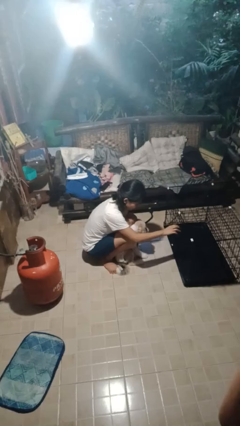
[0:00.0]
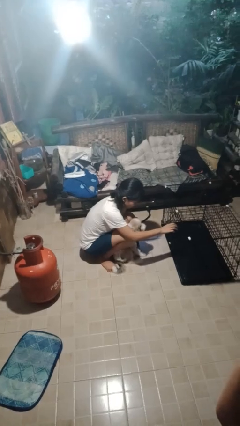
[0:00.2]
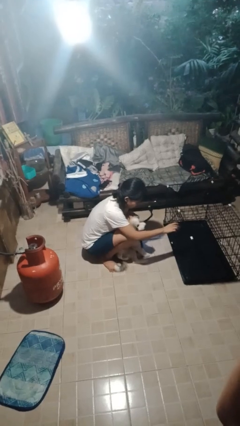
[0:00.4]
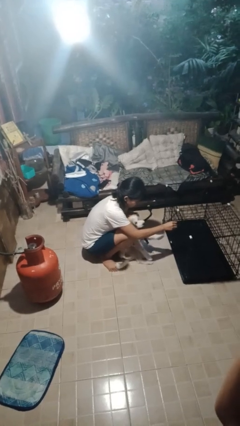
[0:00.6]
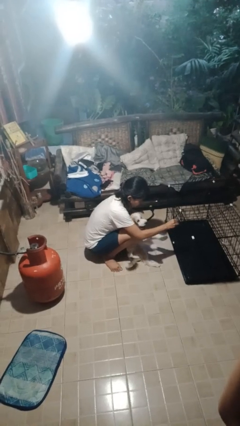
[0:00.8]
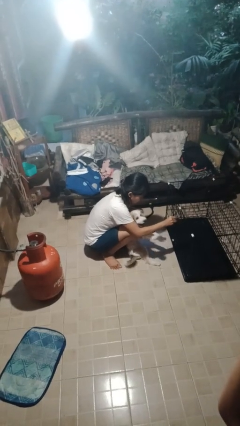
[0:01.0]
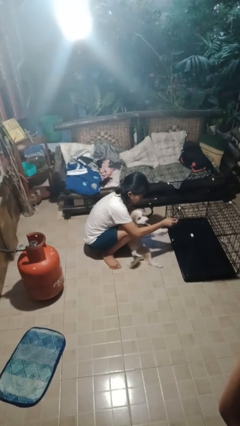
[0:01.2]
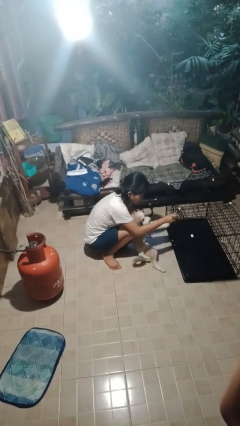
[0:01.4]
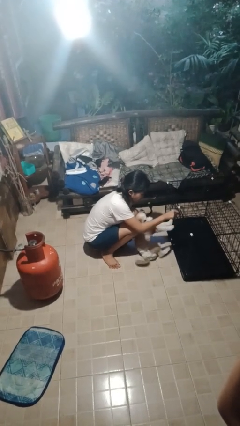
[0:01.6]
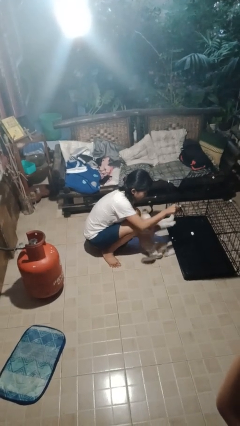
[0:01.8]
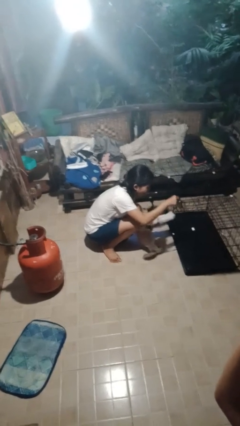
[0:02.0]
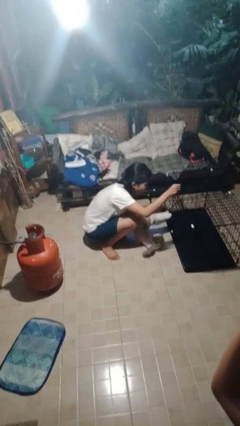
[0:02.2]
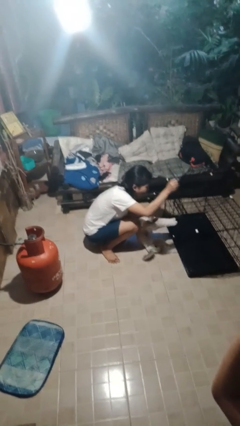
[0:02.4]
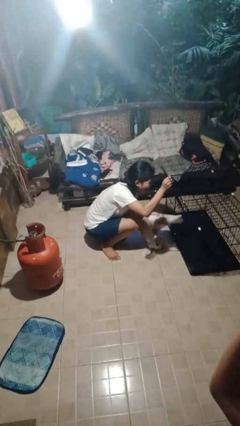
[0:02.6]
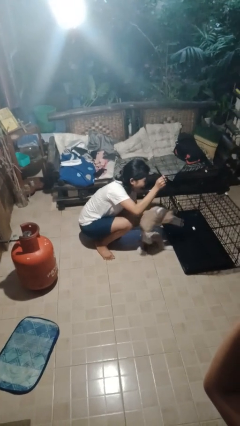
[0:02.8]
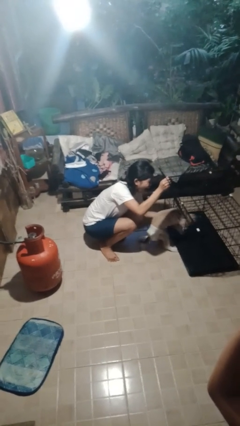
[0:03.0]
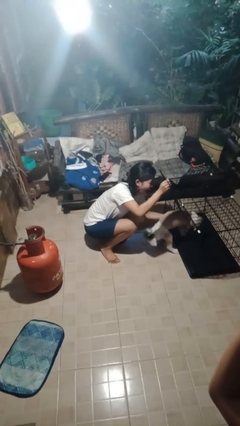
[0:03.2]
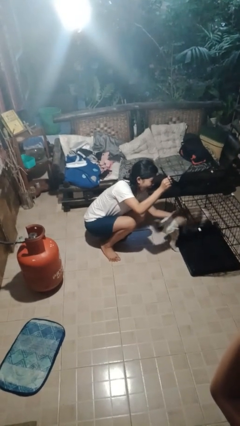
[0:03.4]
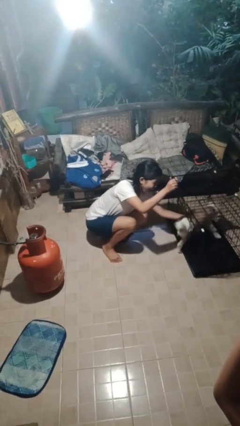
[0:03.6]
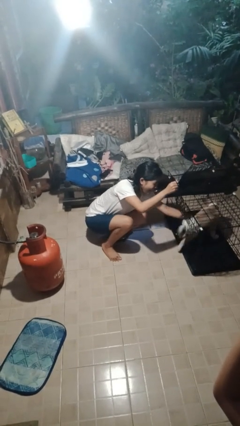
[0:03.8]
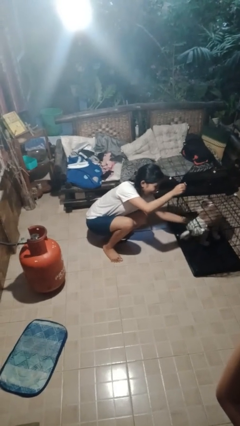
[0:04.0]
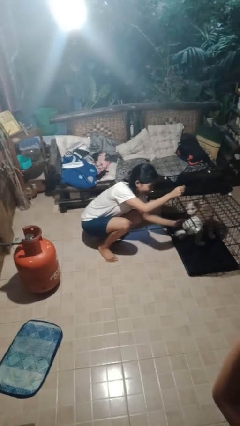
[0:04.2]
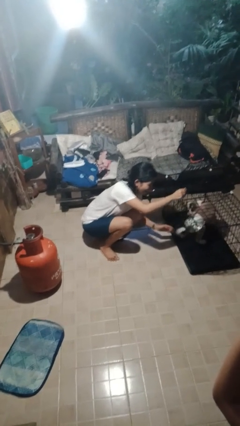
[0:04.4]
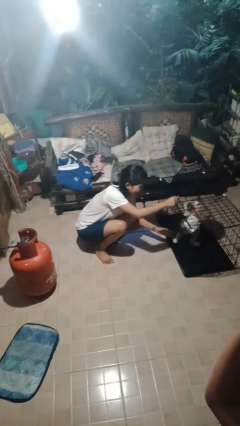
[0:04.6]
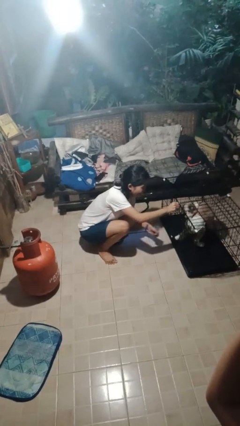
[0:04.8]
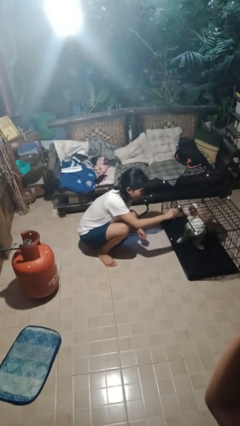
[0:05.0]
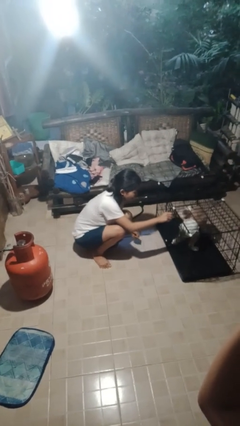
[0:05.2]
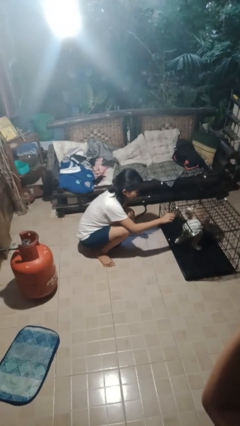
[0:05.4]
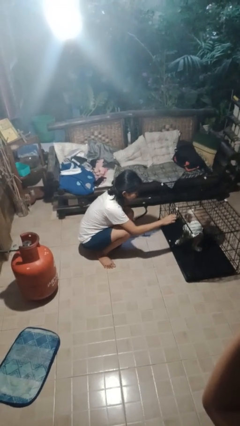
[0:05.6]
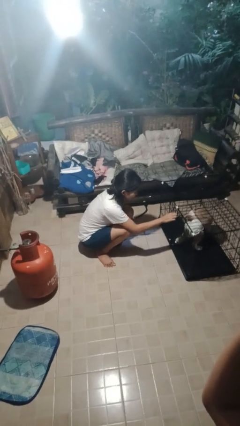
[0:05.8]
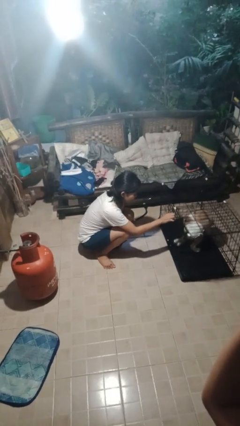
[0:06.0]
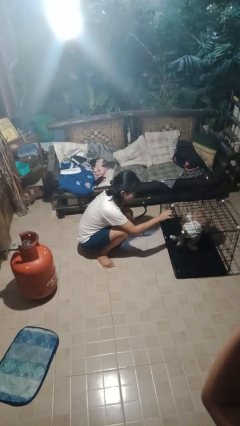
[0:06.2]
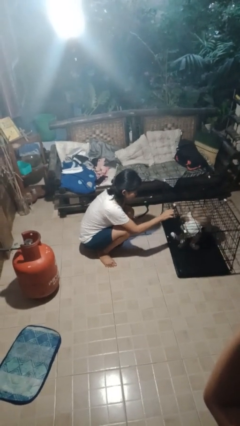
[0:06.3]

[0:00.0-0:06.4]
person crates dog

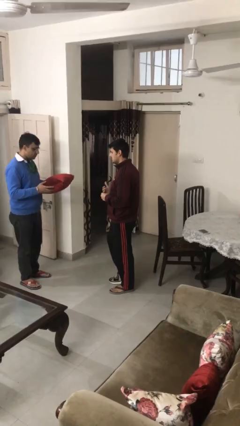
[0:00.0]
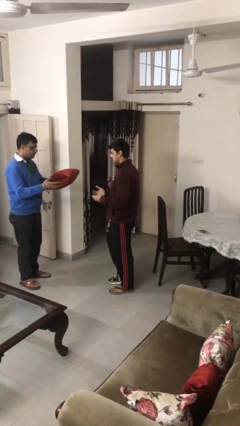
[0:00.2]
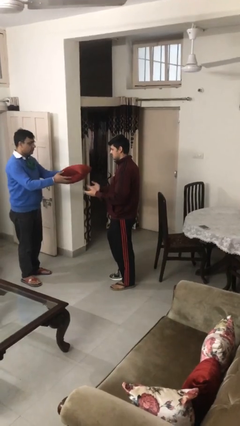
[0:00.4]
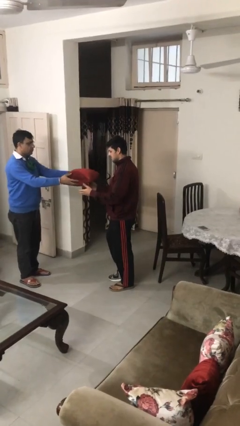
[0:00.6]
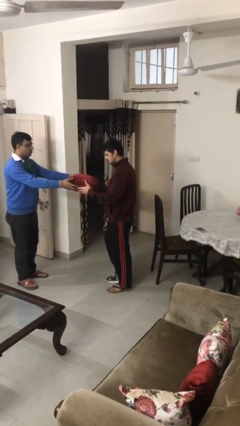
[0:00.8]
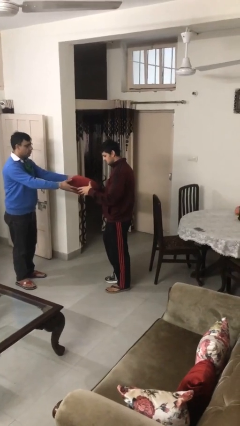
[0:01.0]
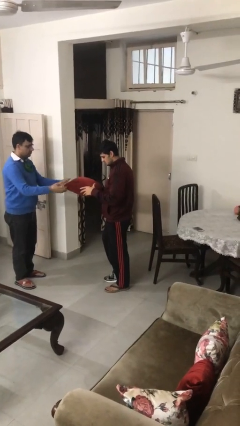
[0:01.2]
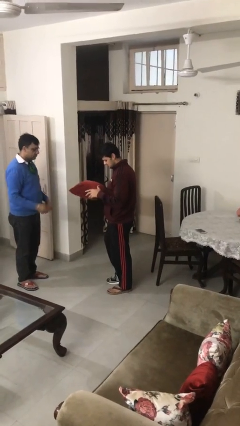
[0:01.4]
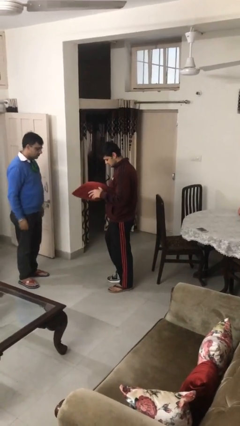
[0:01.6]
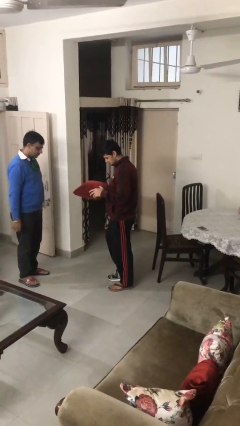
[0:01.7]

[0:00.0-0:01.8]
person transfers object to person

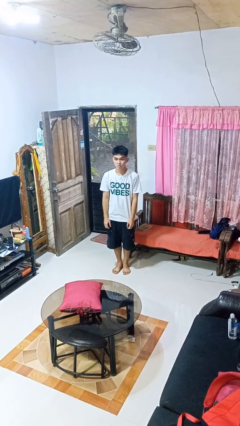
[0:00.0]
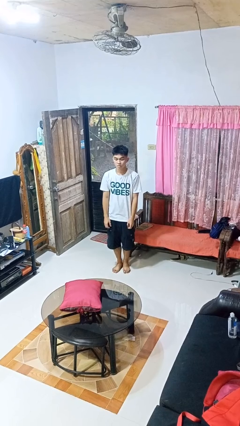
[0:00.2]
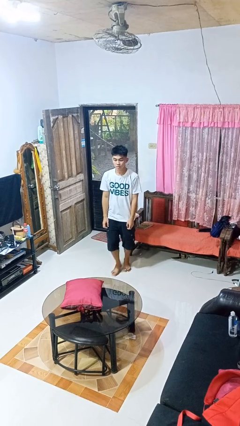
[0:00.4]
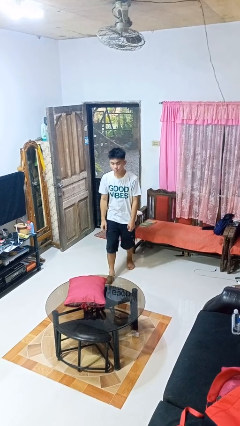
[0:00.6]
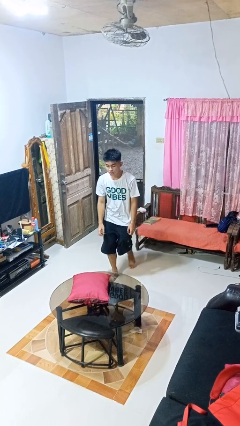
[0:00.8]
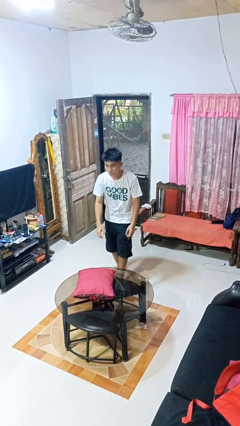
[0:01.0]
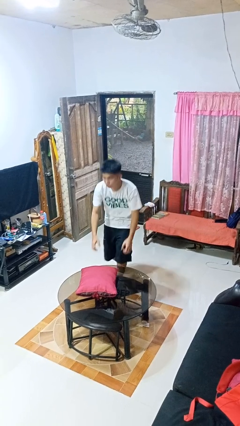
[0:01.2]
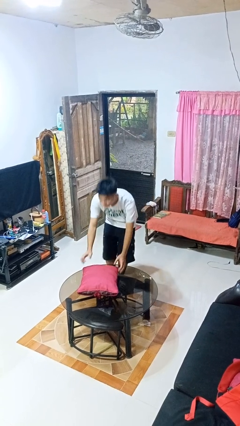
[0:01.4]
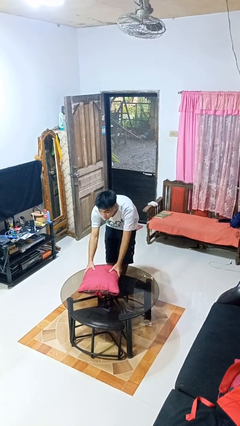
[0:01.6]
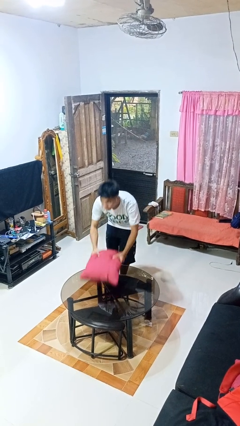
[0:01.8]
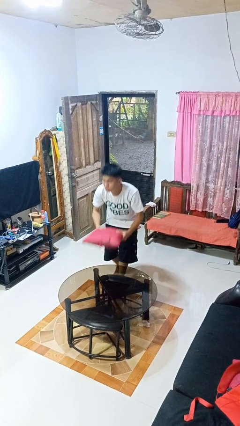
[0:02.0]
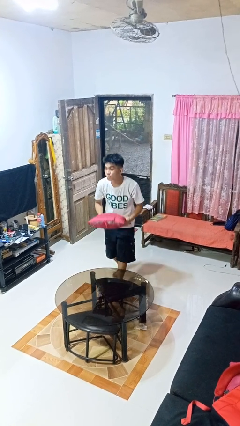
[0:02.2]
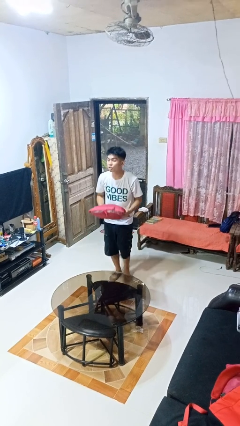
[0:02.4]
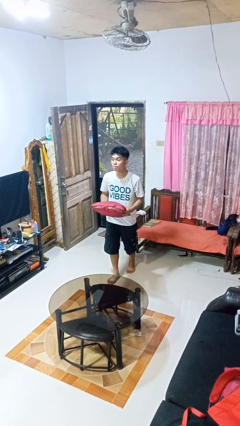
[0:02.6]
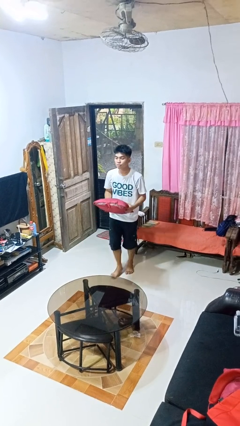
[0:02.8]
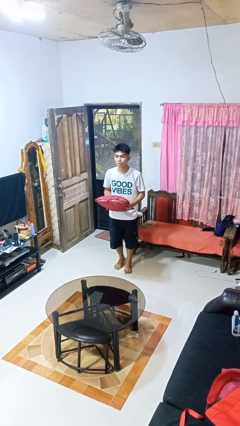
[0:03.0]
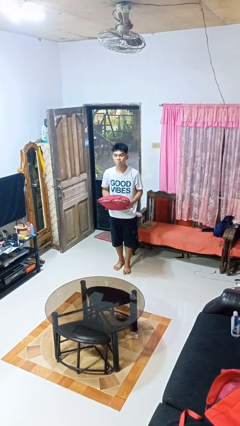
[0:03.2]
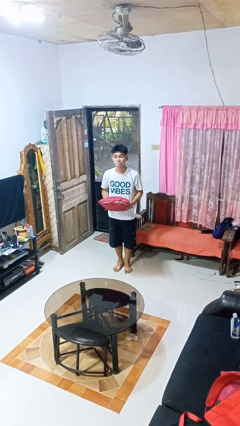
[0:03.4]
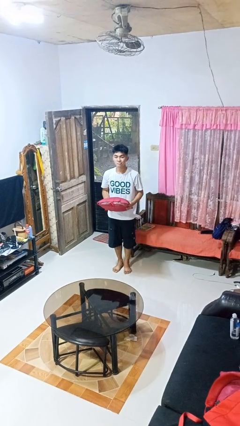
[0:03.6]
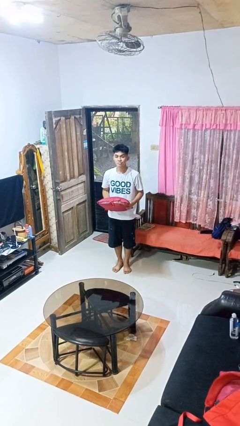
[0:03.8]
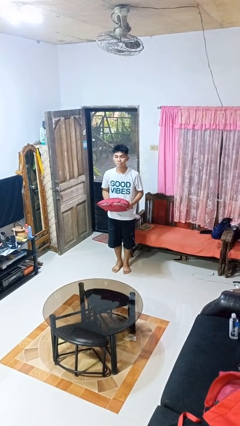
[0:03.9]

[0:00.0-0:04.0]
person picks up object from table

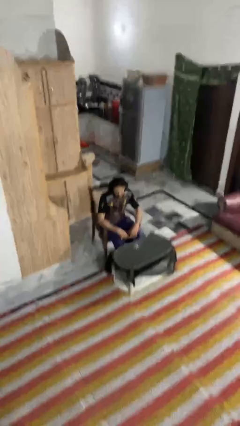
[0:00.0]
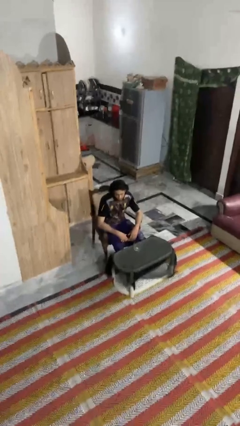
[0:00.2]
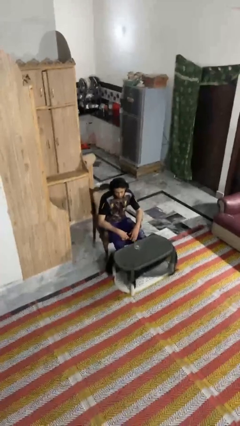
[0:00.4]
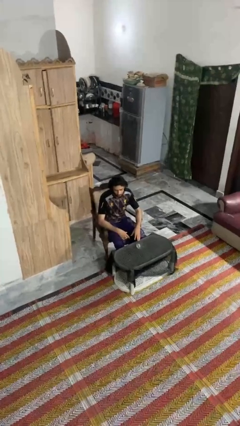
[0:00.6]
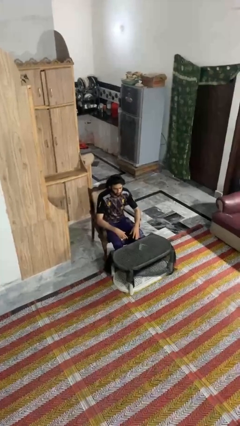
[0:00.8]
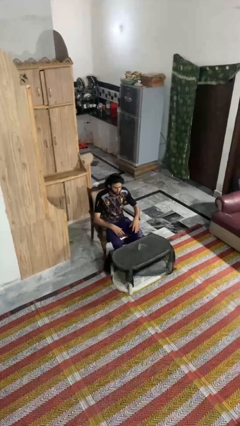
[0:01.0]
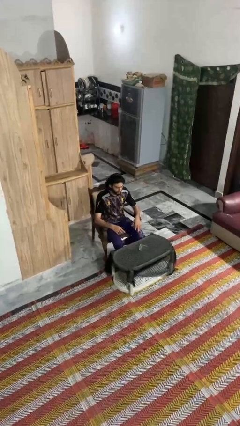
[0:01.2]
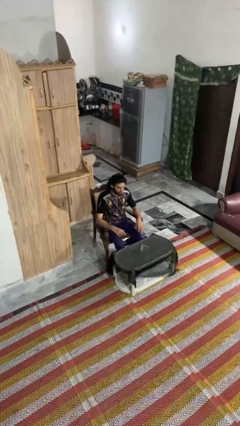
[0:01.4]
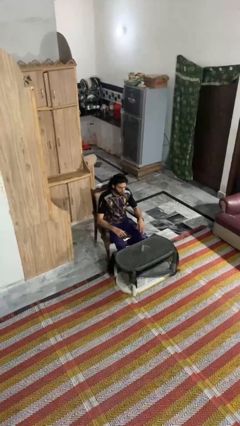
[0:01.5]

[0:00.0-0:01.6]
person knocks over glass

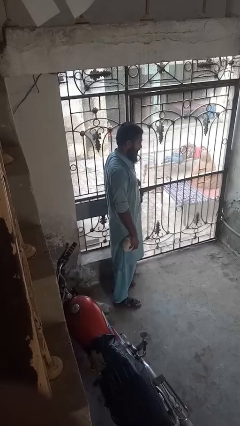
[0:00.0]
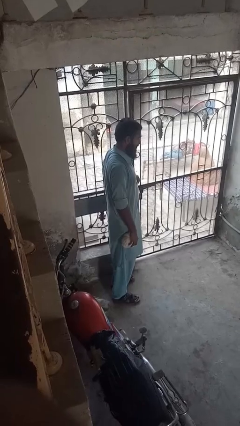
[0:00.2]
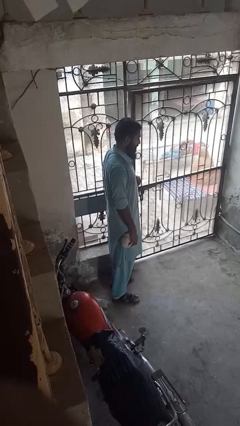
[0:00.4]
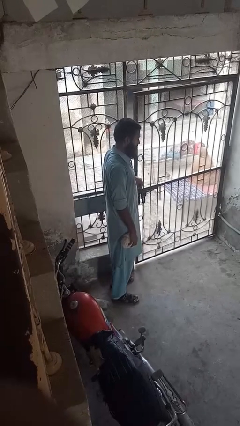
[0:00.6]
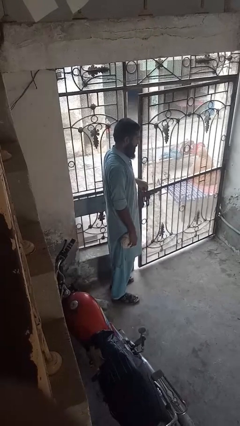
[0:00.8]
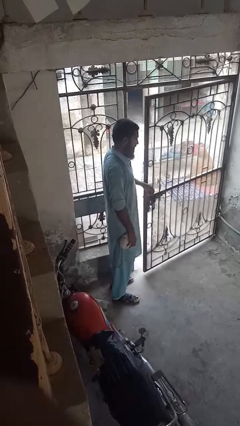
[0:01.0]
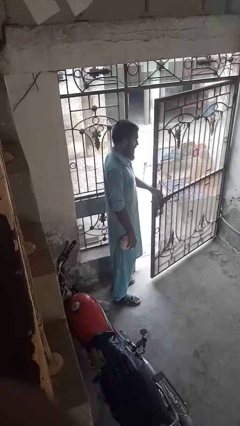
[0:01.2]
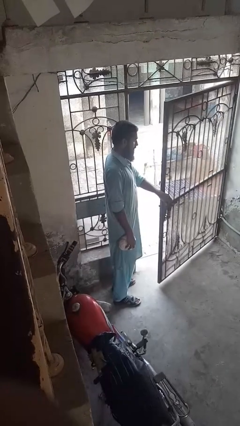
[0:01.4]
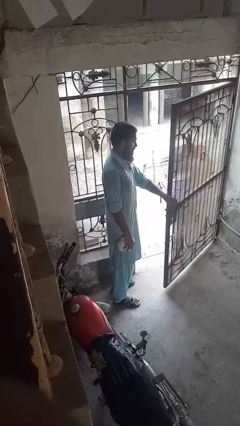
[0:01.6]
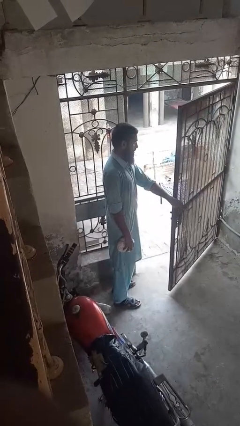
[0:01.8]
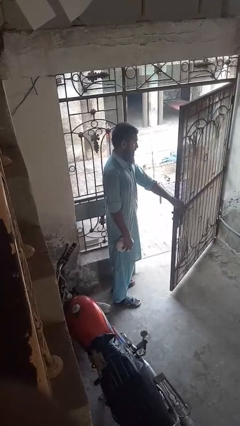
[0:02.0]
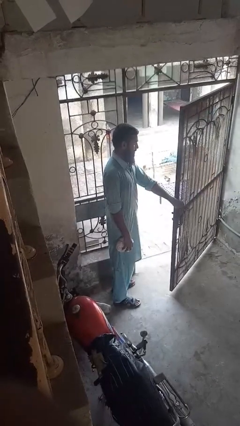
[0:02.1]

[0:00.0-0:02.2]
person opens gate

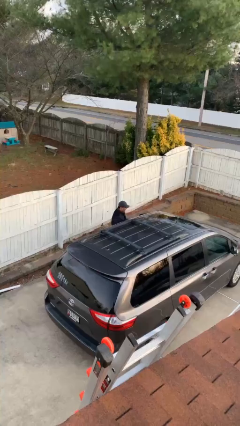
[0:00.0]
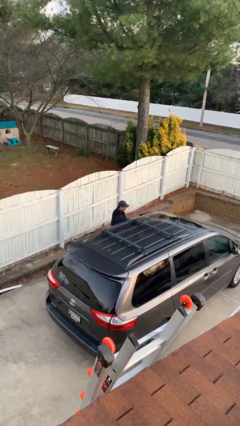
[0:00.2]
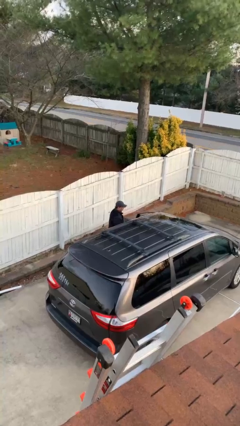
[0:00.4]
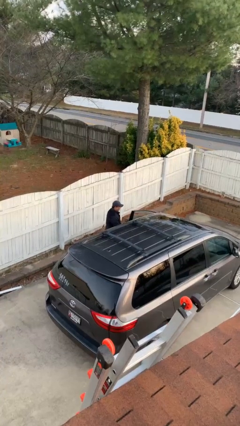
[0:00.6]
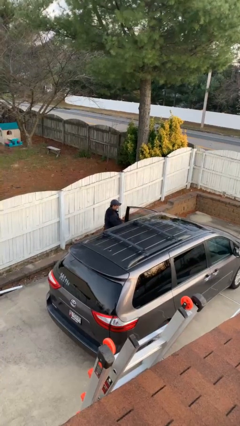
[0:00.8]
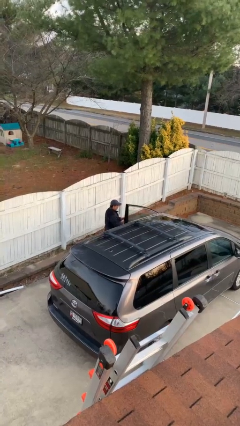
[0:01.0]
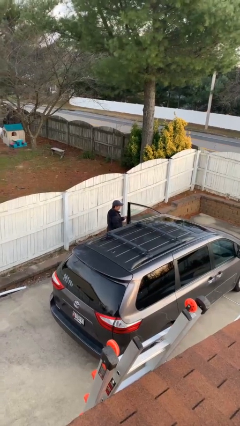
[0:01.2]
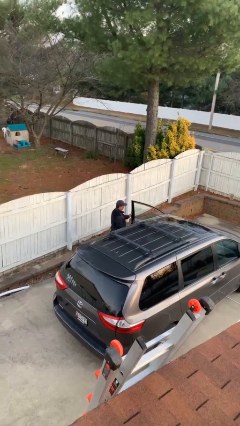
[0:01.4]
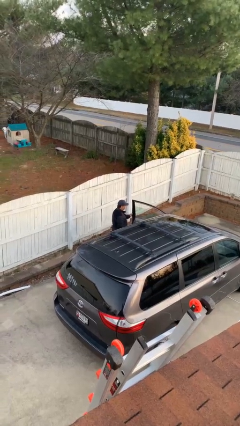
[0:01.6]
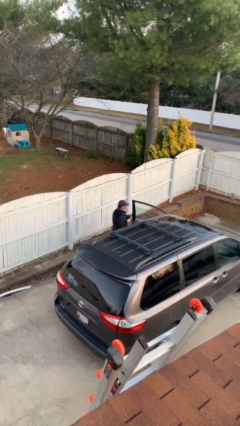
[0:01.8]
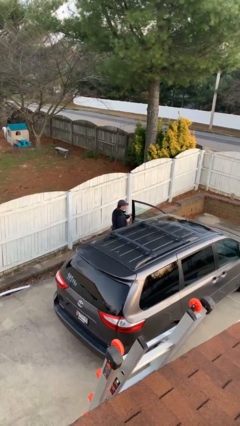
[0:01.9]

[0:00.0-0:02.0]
person opens car door
